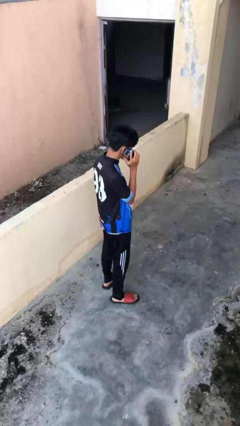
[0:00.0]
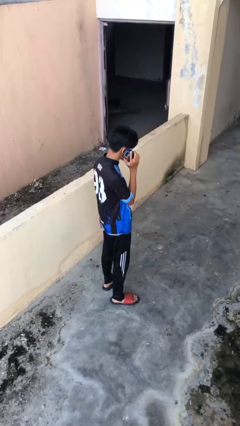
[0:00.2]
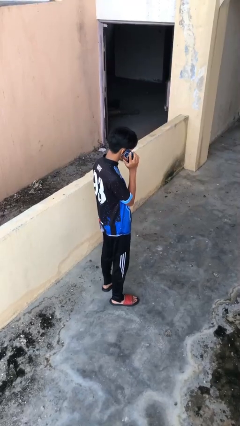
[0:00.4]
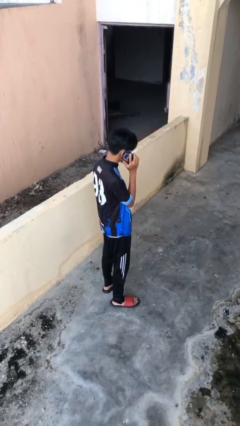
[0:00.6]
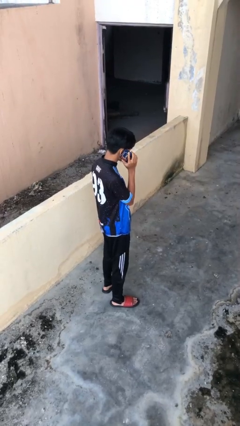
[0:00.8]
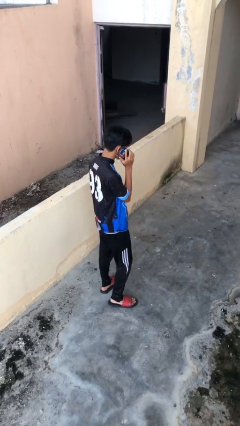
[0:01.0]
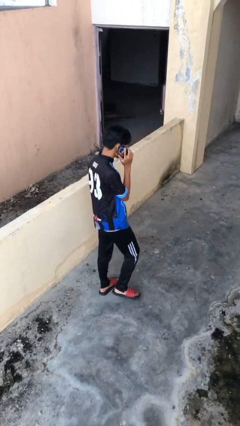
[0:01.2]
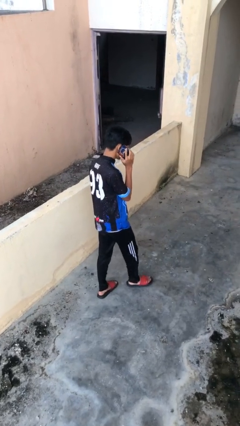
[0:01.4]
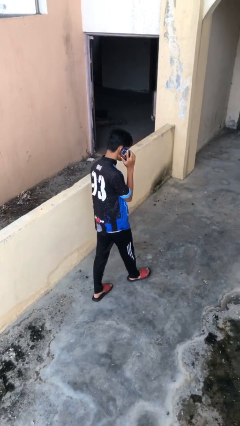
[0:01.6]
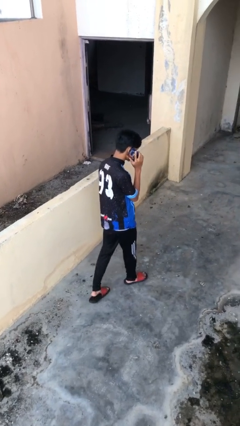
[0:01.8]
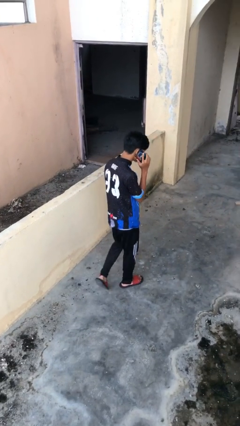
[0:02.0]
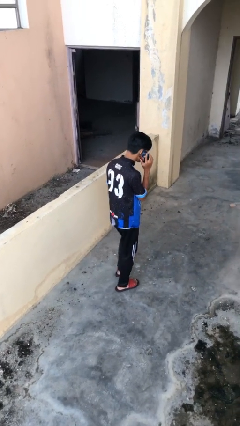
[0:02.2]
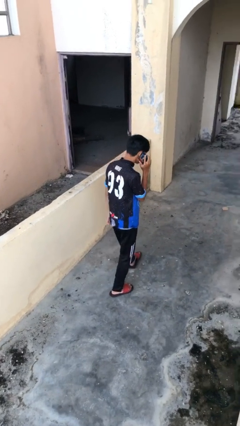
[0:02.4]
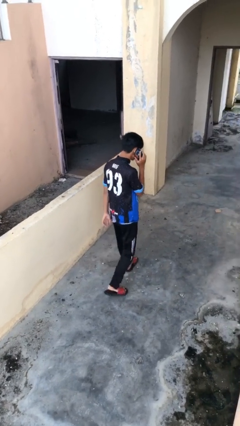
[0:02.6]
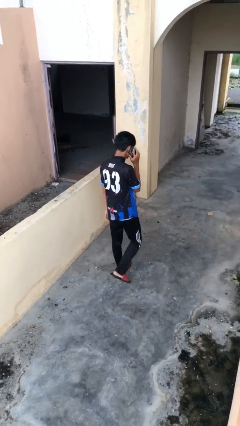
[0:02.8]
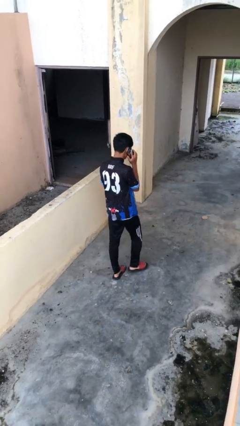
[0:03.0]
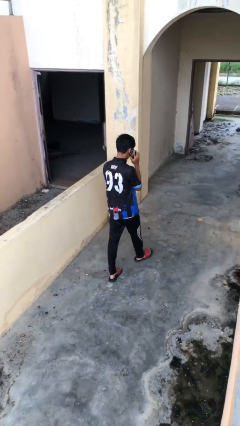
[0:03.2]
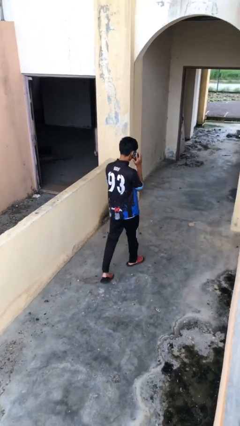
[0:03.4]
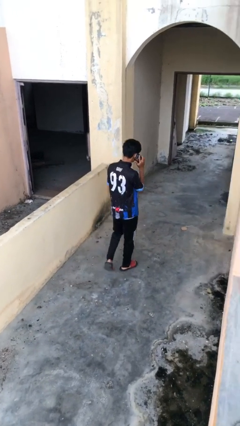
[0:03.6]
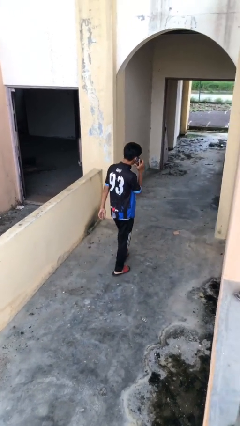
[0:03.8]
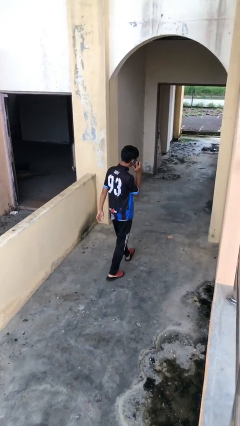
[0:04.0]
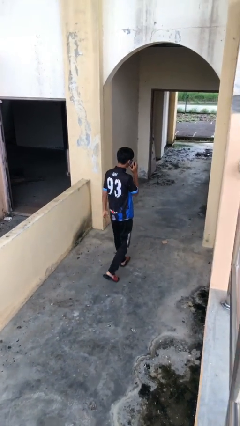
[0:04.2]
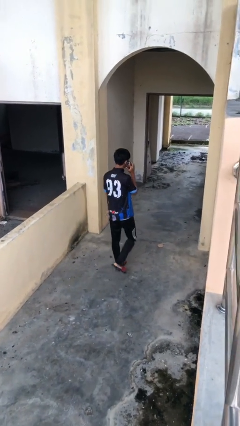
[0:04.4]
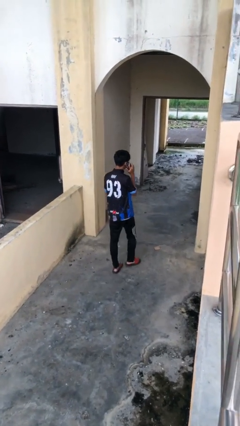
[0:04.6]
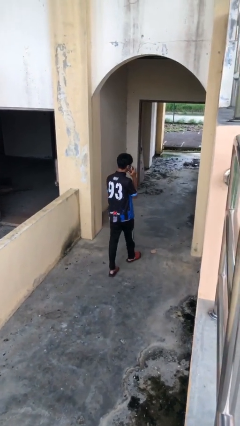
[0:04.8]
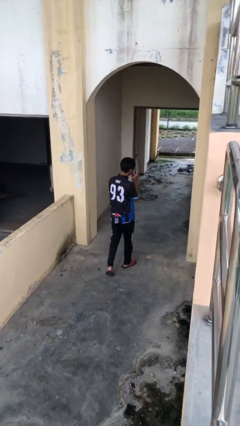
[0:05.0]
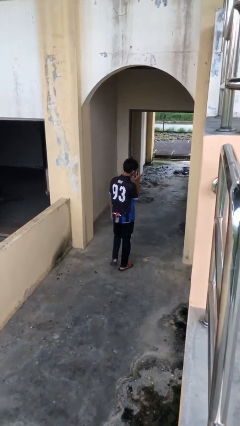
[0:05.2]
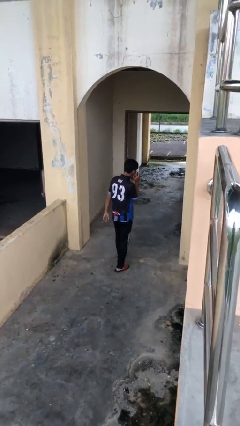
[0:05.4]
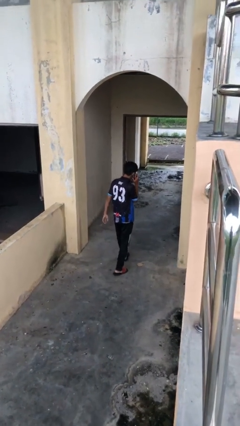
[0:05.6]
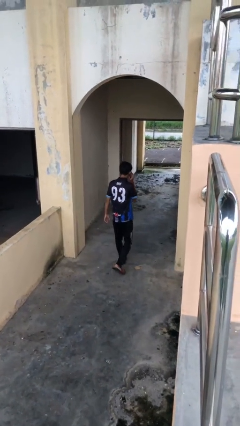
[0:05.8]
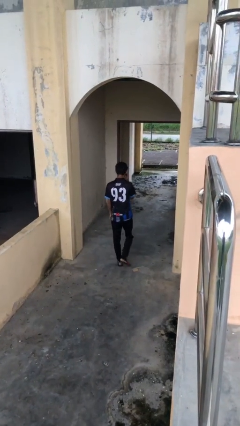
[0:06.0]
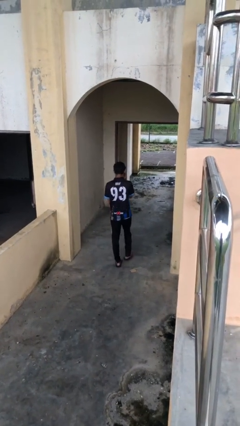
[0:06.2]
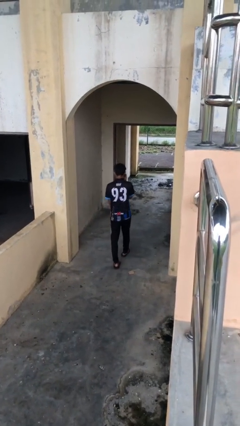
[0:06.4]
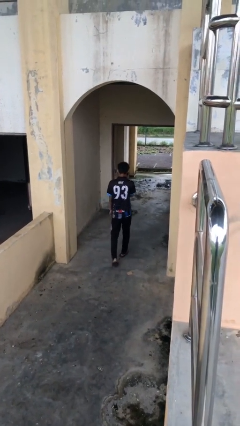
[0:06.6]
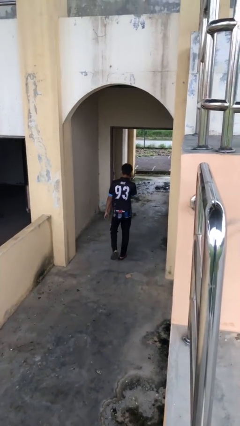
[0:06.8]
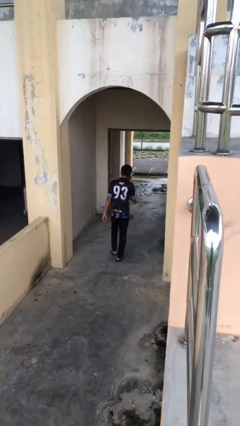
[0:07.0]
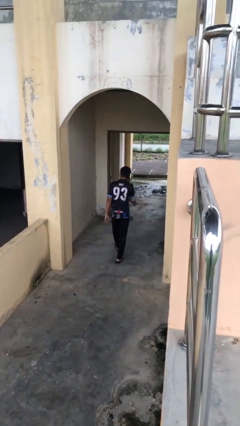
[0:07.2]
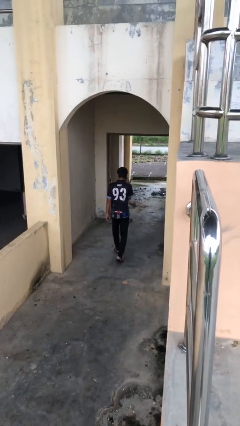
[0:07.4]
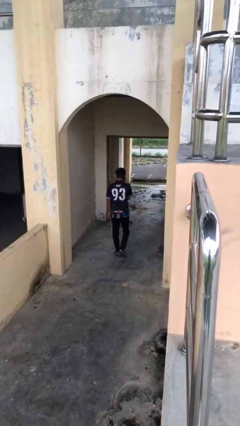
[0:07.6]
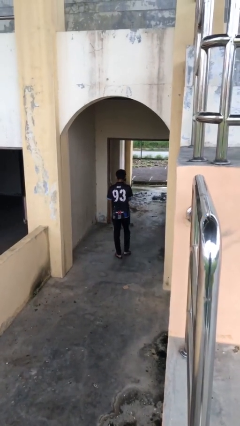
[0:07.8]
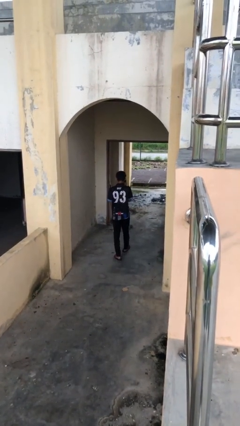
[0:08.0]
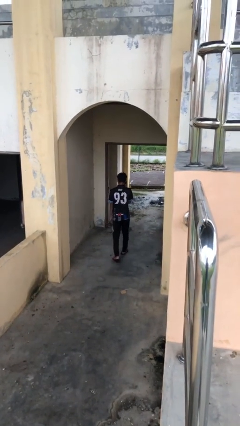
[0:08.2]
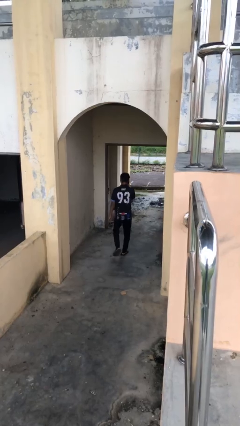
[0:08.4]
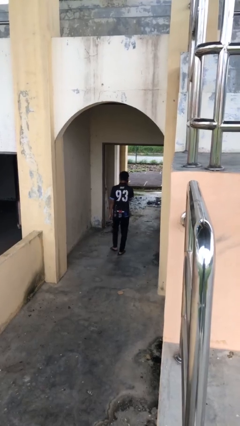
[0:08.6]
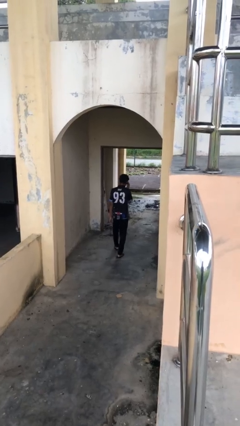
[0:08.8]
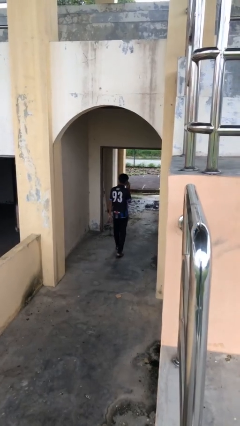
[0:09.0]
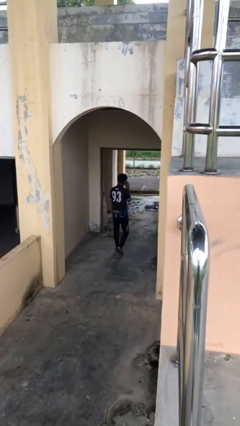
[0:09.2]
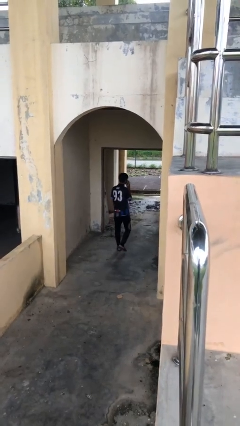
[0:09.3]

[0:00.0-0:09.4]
person exits scene through structure

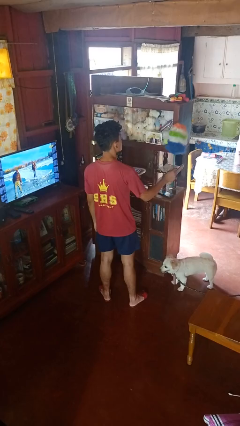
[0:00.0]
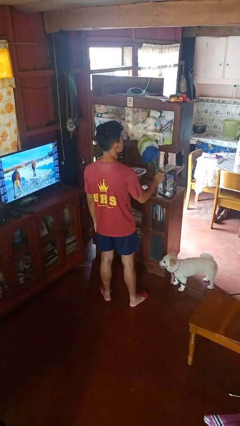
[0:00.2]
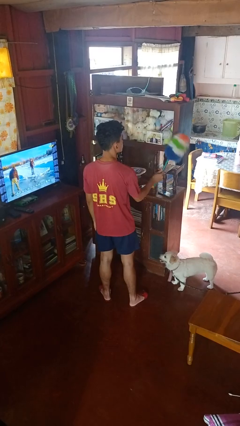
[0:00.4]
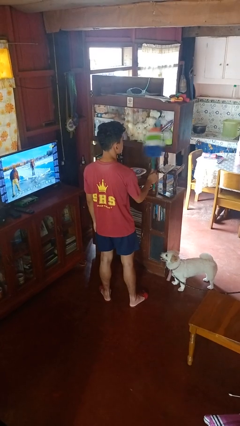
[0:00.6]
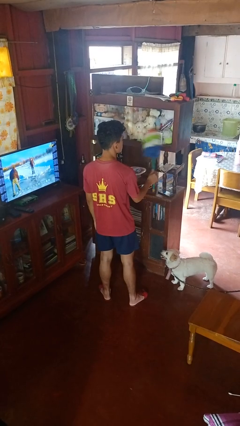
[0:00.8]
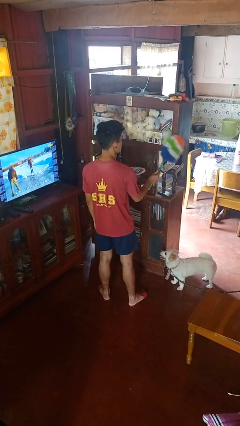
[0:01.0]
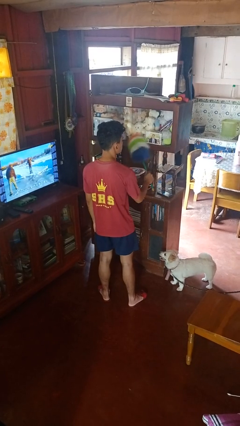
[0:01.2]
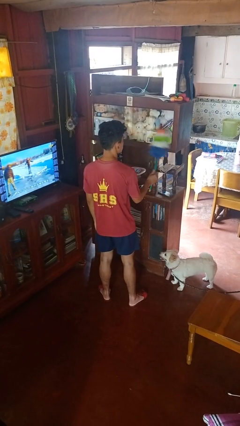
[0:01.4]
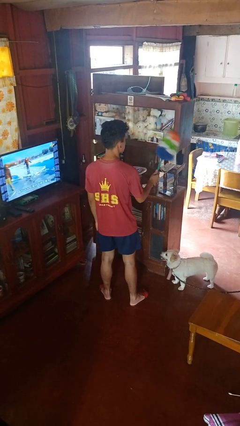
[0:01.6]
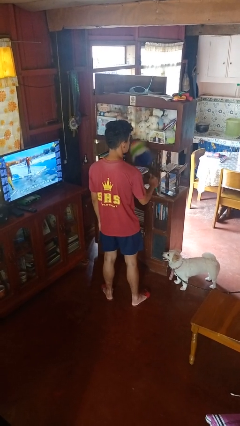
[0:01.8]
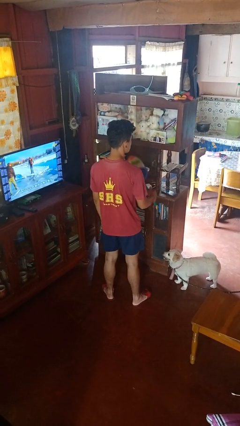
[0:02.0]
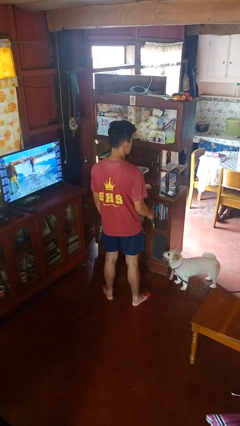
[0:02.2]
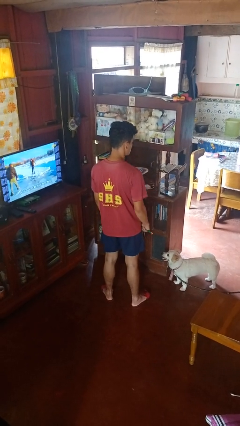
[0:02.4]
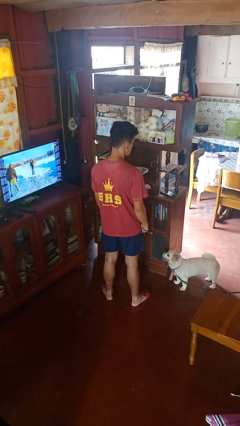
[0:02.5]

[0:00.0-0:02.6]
person dusts furniture

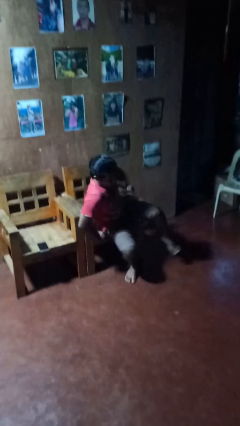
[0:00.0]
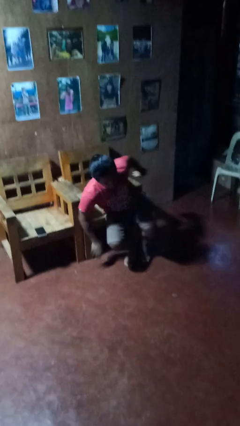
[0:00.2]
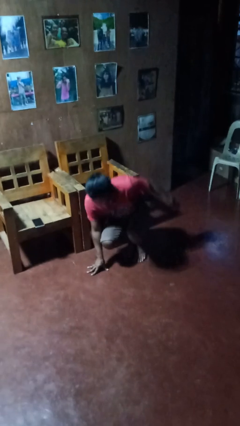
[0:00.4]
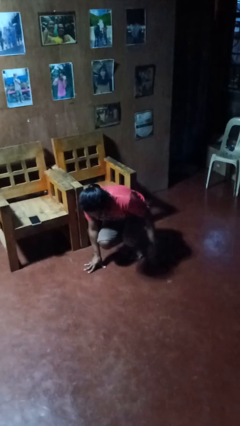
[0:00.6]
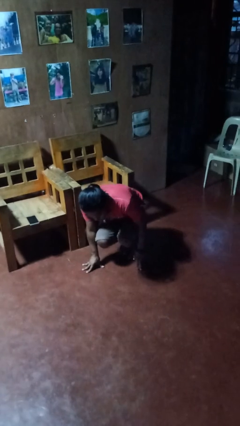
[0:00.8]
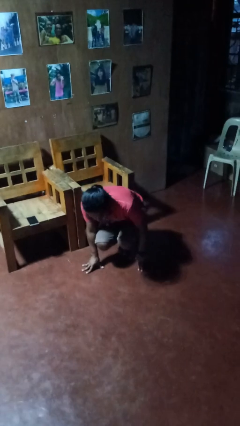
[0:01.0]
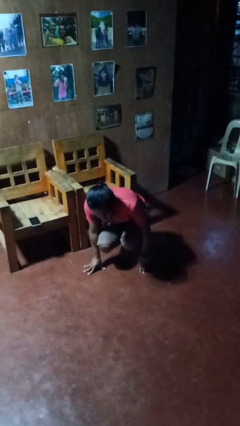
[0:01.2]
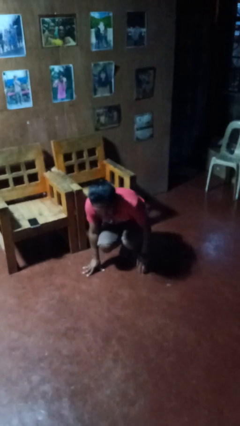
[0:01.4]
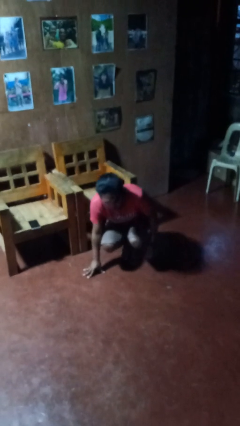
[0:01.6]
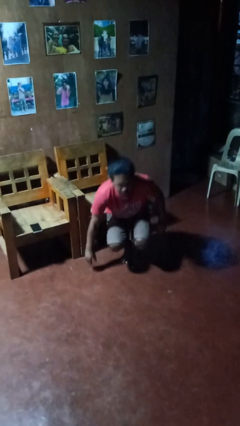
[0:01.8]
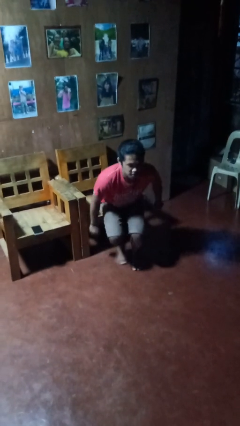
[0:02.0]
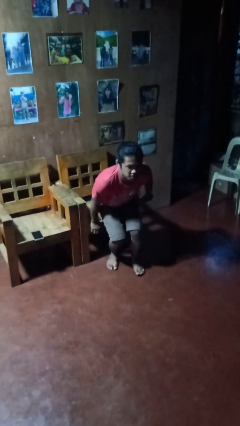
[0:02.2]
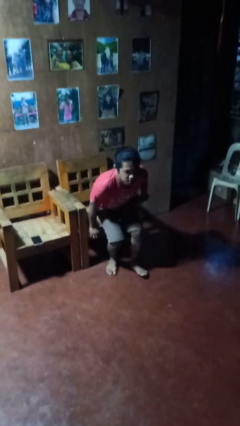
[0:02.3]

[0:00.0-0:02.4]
person falls from chair

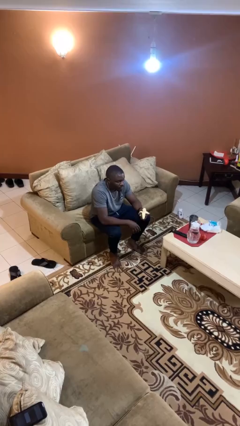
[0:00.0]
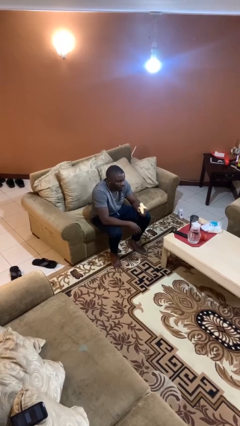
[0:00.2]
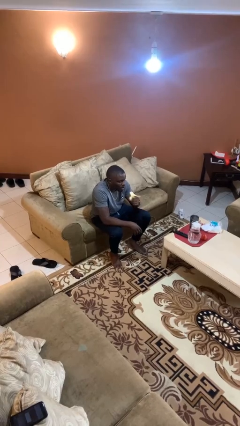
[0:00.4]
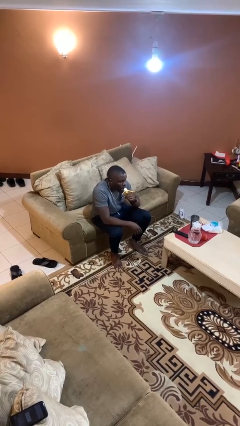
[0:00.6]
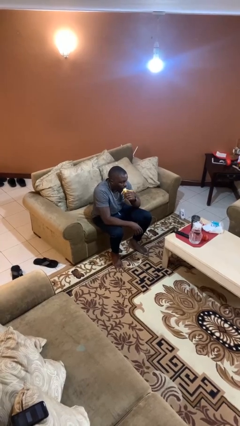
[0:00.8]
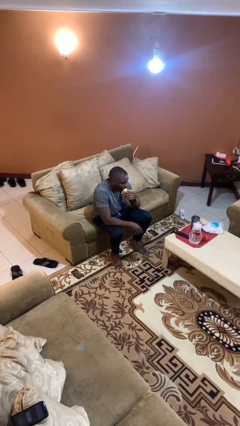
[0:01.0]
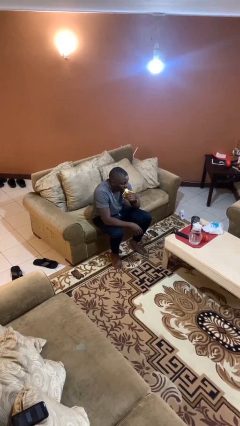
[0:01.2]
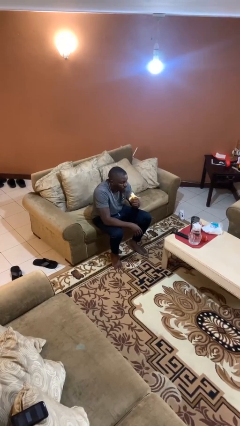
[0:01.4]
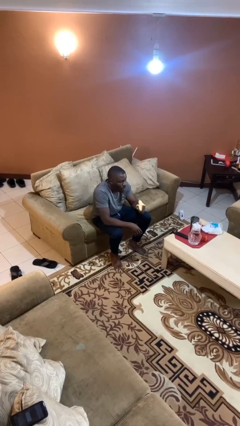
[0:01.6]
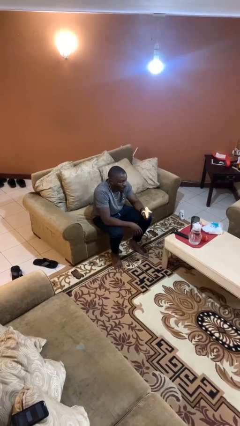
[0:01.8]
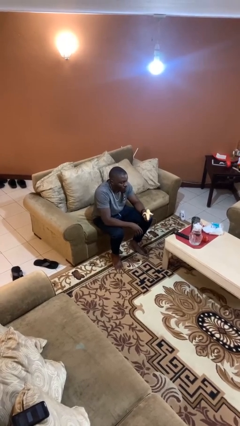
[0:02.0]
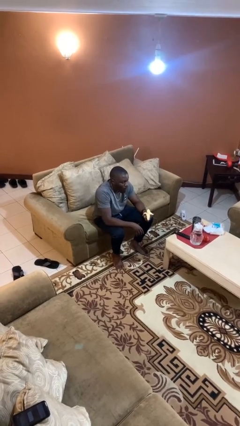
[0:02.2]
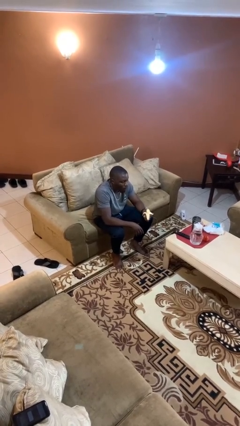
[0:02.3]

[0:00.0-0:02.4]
person eats banana

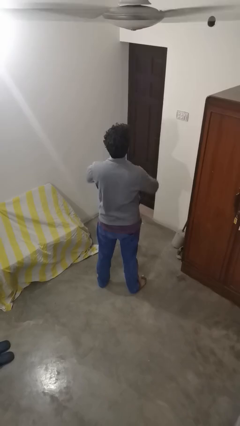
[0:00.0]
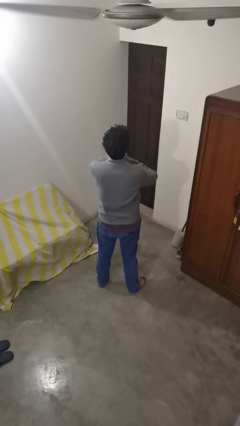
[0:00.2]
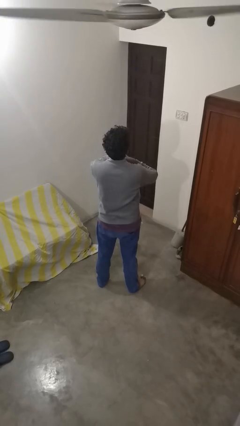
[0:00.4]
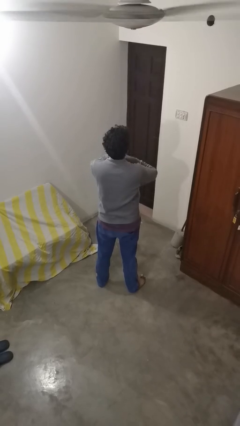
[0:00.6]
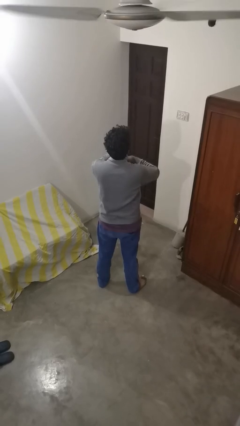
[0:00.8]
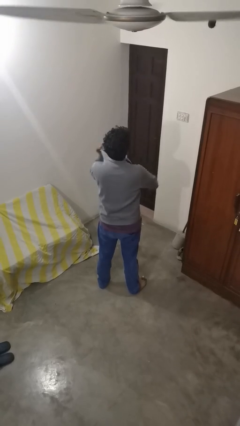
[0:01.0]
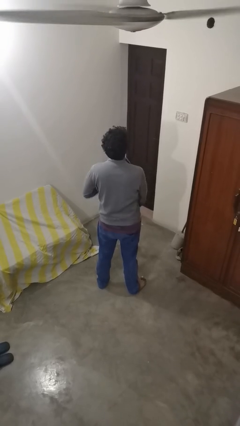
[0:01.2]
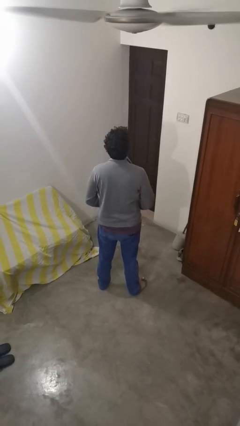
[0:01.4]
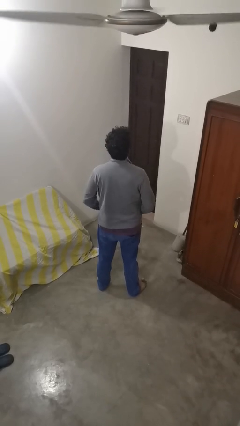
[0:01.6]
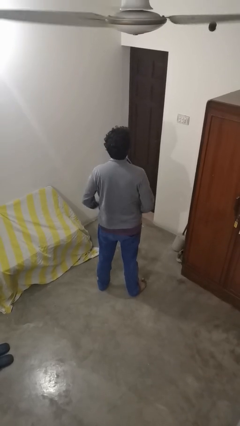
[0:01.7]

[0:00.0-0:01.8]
person unzips jacket
